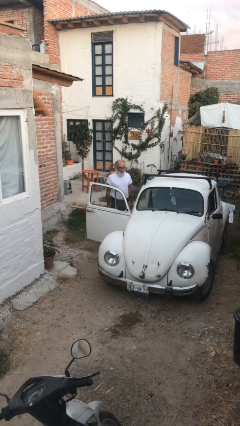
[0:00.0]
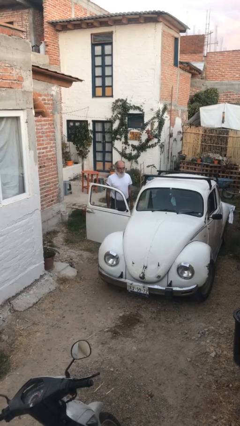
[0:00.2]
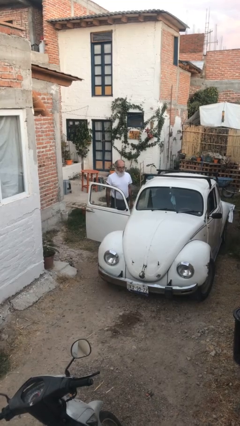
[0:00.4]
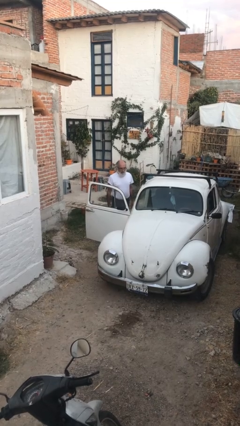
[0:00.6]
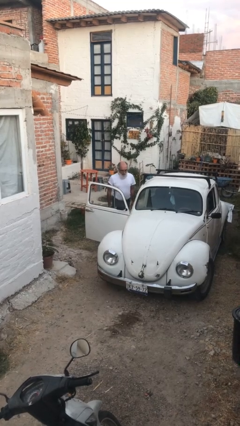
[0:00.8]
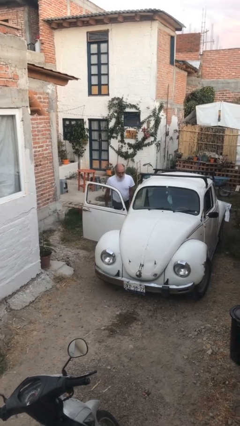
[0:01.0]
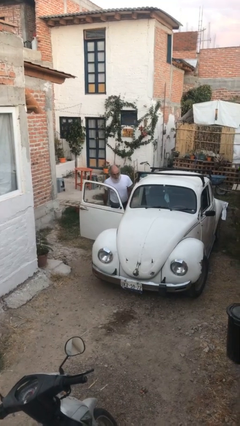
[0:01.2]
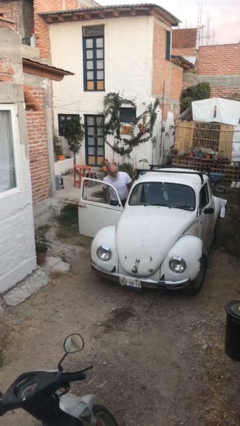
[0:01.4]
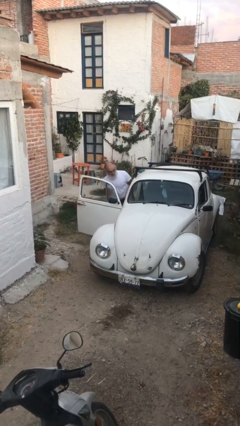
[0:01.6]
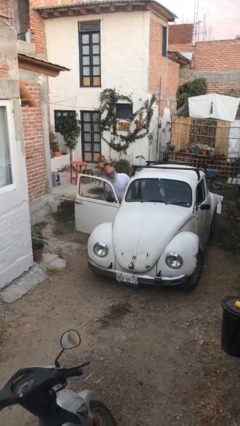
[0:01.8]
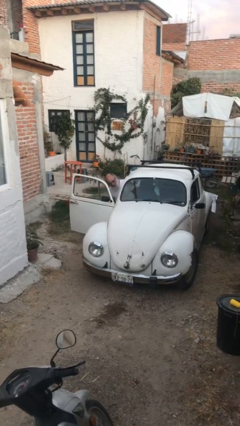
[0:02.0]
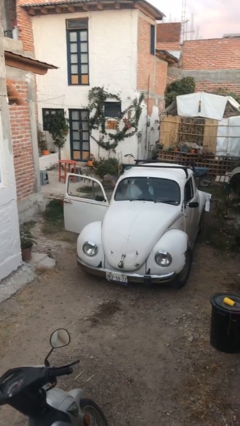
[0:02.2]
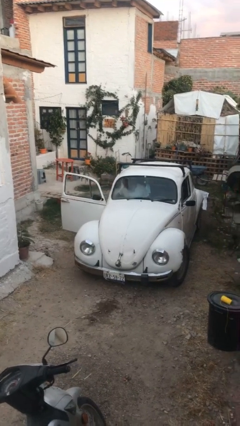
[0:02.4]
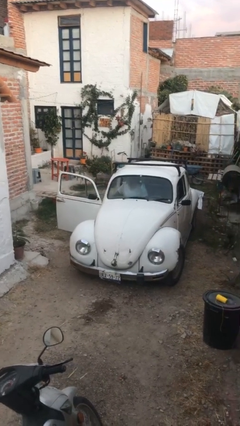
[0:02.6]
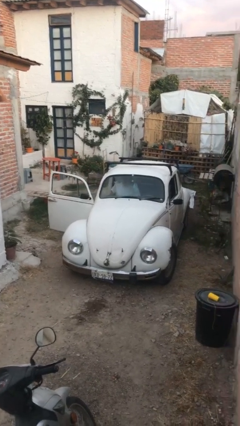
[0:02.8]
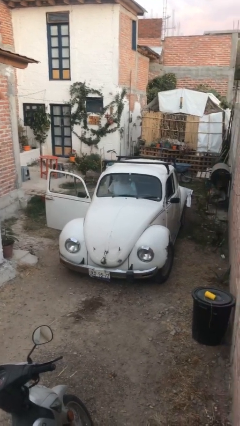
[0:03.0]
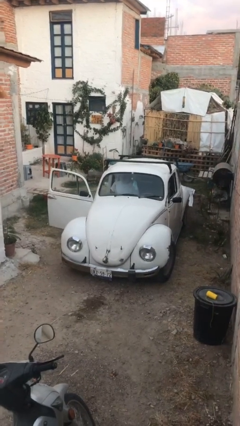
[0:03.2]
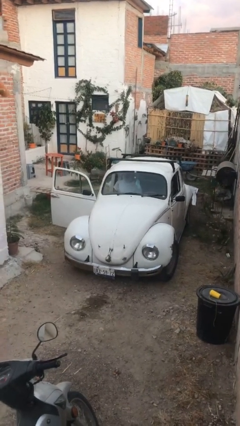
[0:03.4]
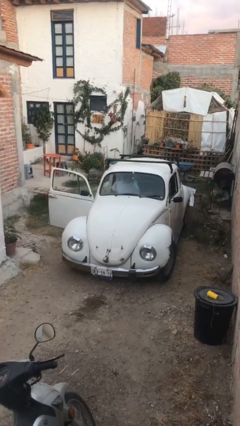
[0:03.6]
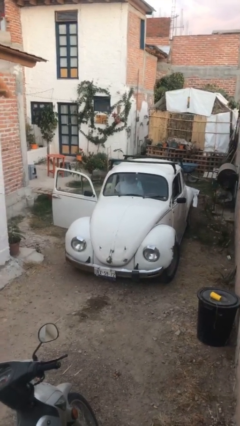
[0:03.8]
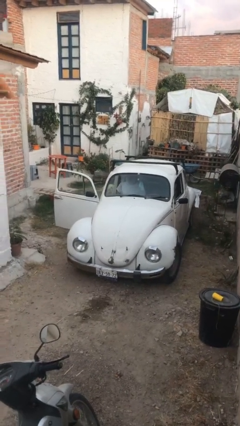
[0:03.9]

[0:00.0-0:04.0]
person enters car

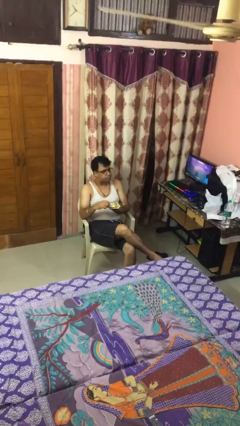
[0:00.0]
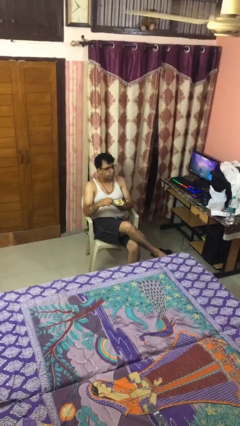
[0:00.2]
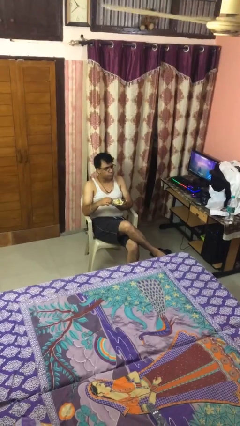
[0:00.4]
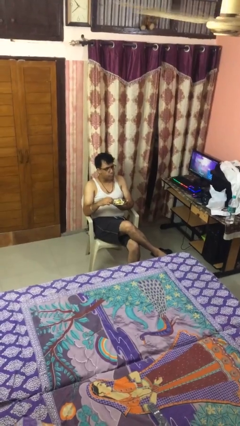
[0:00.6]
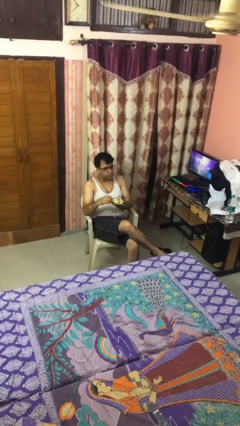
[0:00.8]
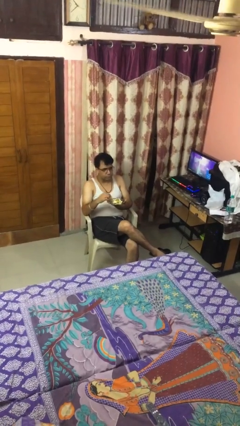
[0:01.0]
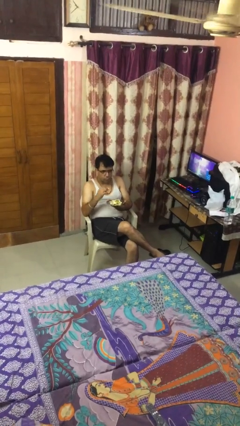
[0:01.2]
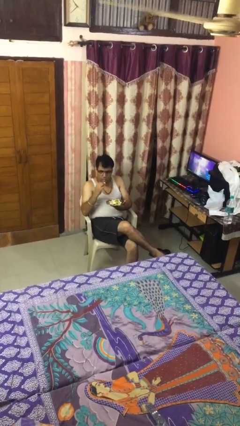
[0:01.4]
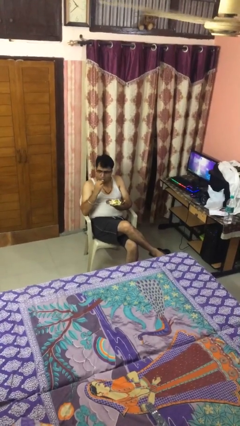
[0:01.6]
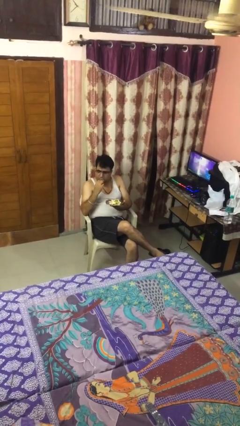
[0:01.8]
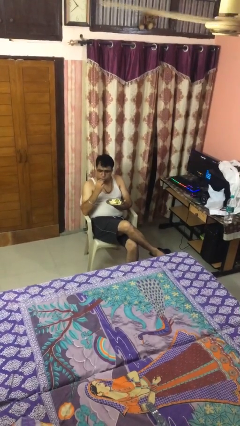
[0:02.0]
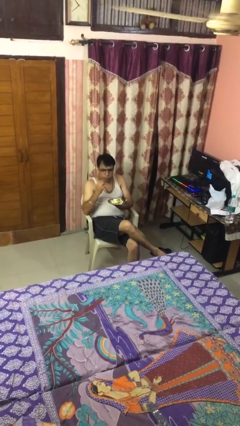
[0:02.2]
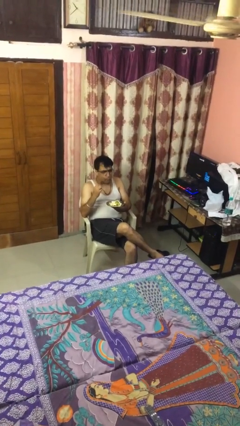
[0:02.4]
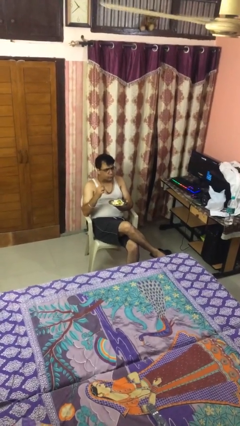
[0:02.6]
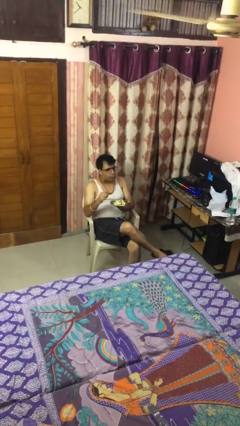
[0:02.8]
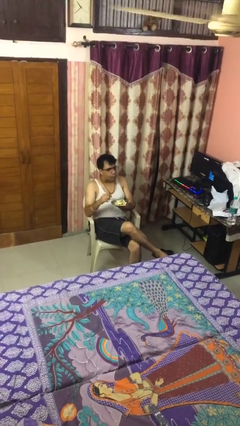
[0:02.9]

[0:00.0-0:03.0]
person eats with hands

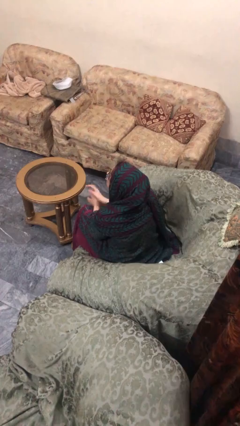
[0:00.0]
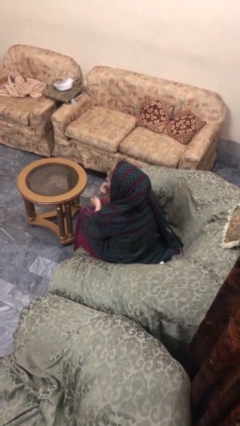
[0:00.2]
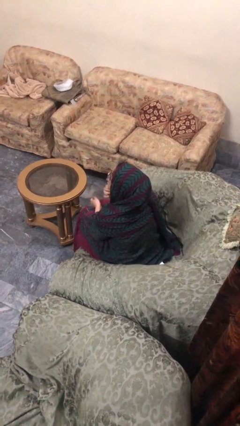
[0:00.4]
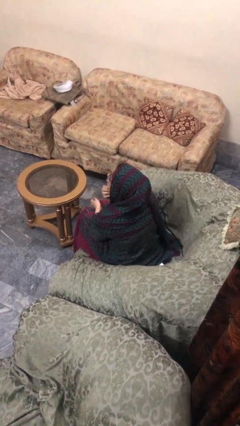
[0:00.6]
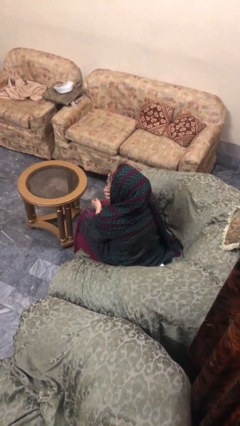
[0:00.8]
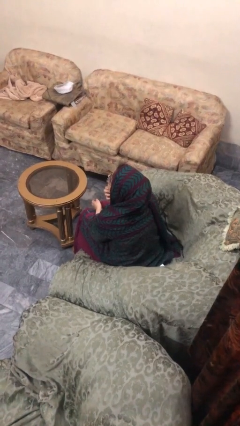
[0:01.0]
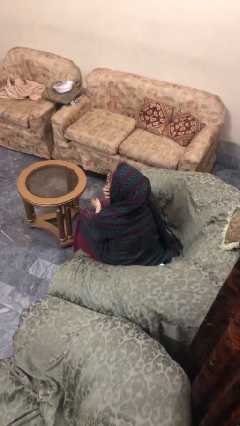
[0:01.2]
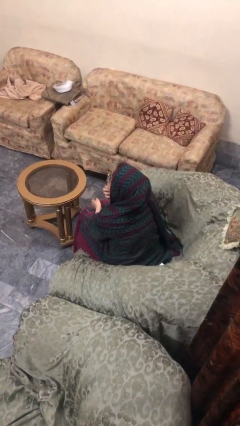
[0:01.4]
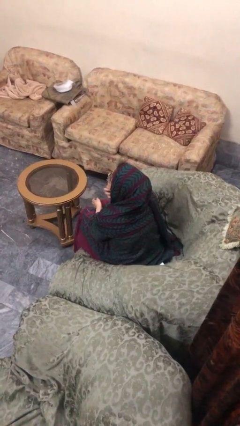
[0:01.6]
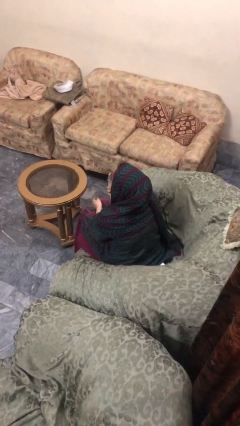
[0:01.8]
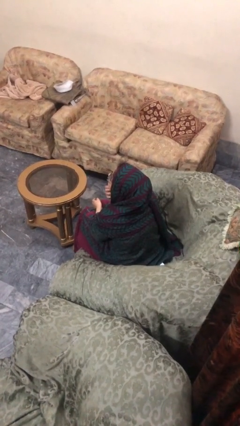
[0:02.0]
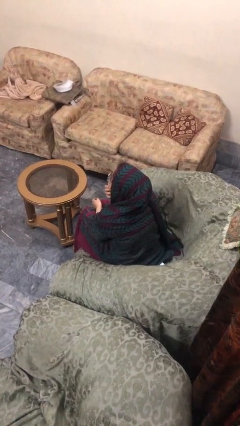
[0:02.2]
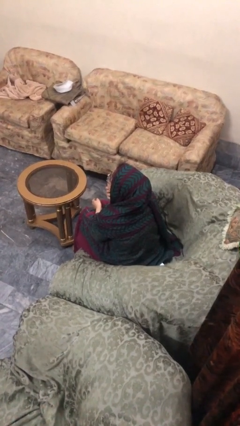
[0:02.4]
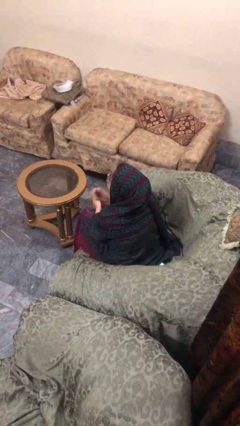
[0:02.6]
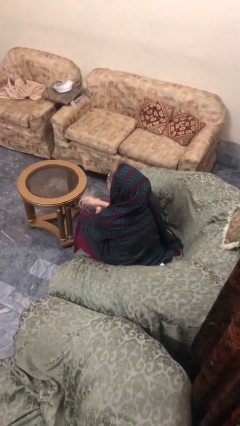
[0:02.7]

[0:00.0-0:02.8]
person strokes chin

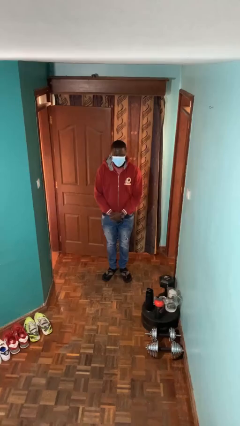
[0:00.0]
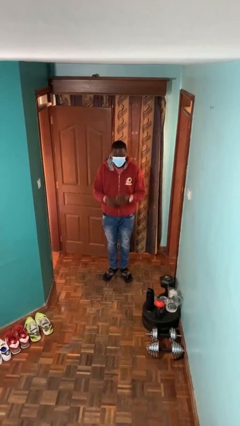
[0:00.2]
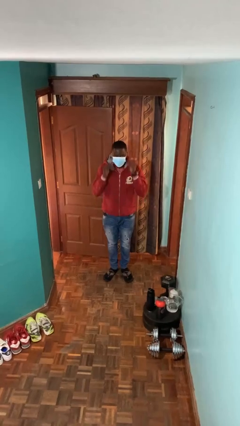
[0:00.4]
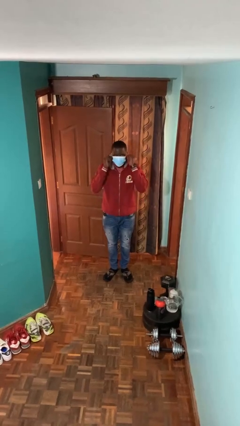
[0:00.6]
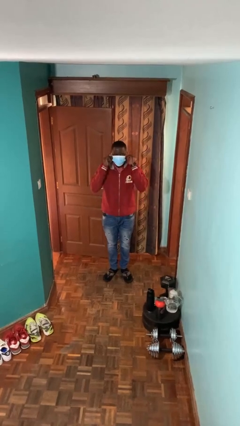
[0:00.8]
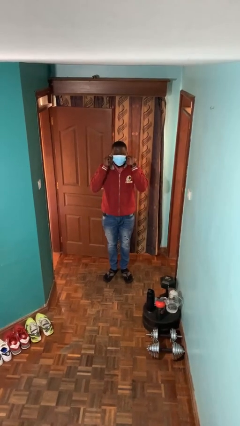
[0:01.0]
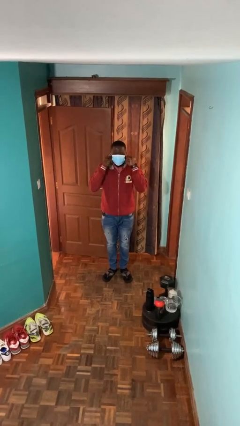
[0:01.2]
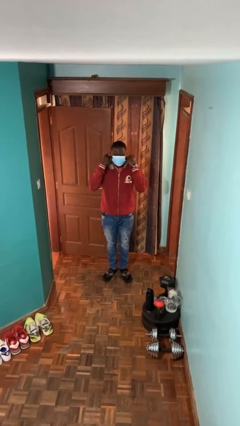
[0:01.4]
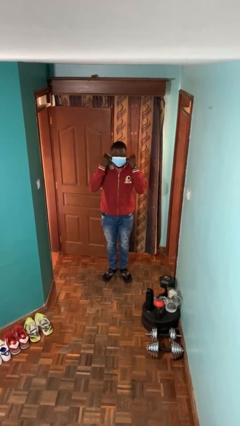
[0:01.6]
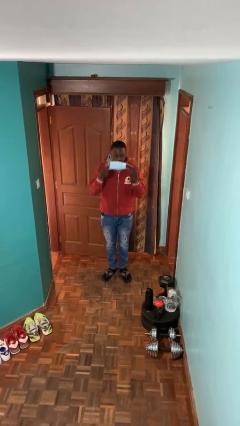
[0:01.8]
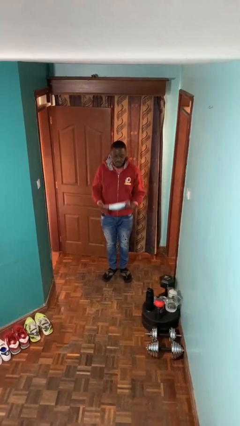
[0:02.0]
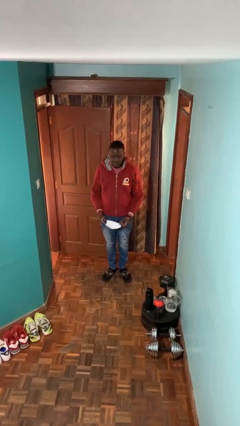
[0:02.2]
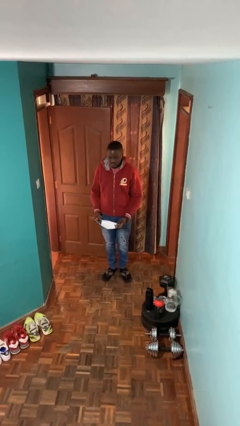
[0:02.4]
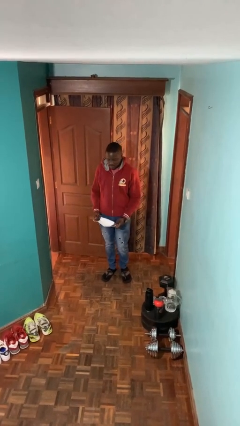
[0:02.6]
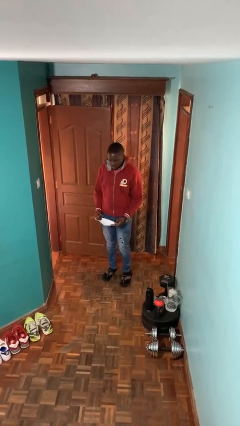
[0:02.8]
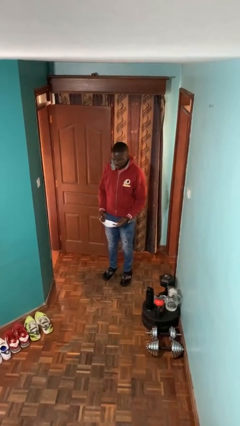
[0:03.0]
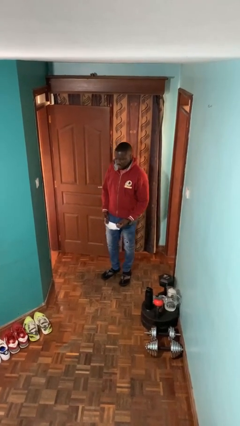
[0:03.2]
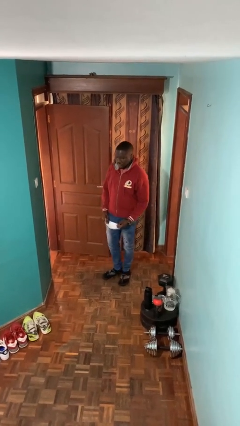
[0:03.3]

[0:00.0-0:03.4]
person takes off facemask

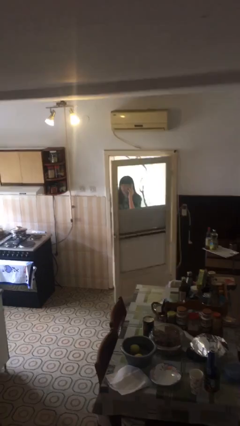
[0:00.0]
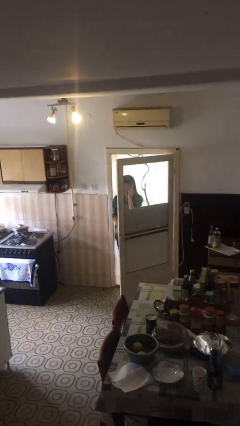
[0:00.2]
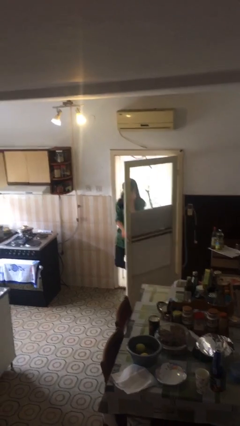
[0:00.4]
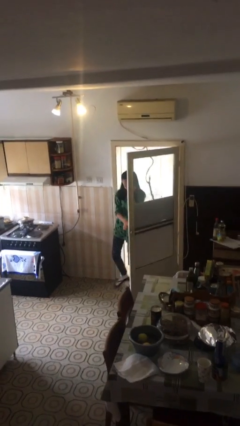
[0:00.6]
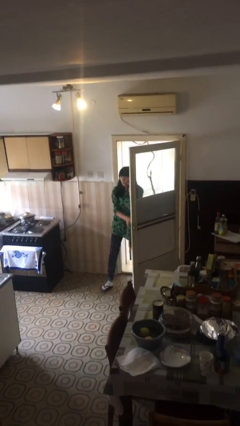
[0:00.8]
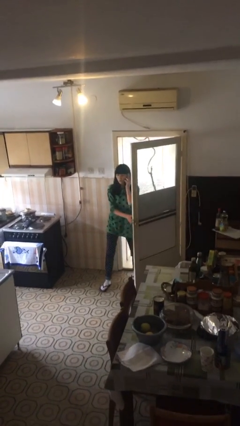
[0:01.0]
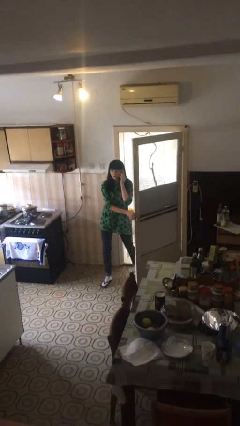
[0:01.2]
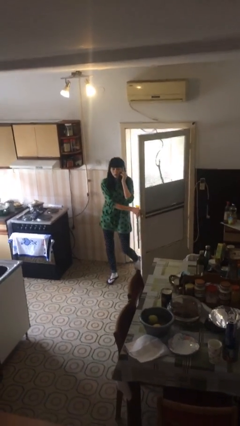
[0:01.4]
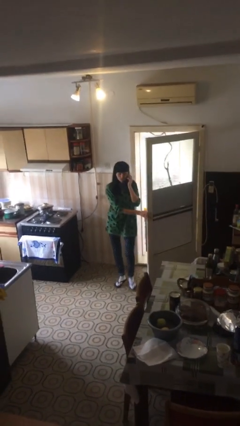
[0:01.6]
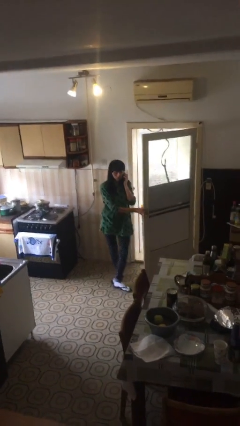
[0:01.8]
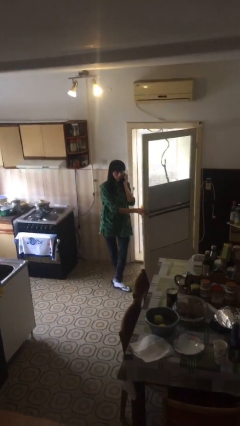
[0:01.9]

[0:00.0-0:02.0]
person enters scene through structure

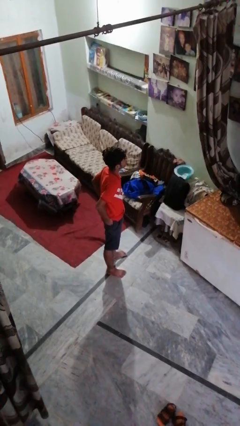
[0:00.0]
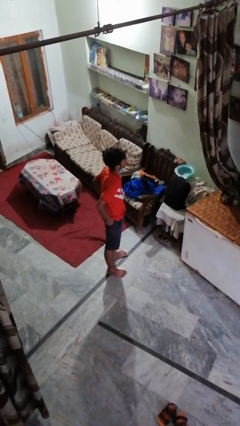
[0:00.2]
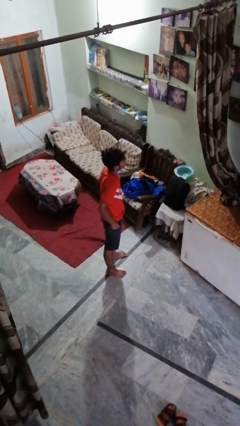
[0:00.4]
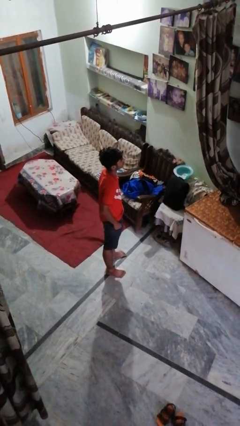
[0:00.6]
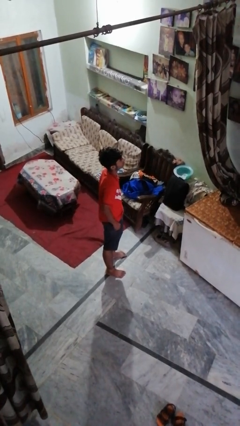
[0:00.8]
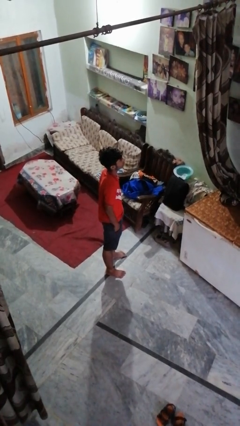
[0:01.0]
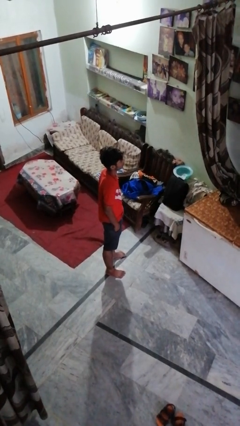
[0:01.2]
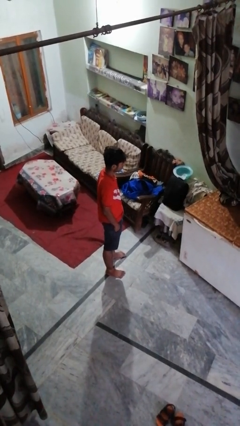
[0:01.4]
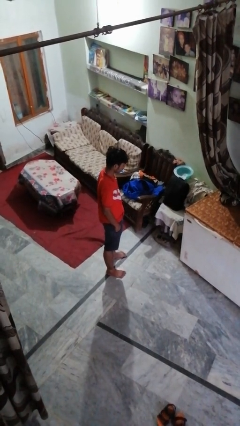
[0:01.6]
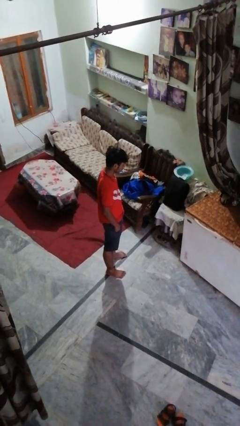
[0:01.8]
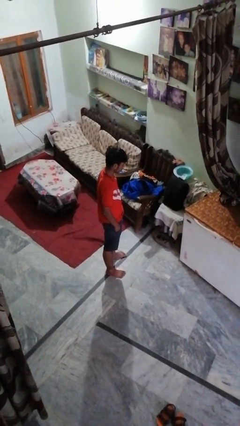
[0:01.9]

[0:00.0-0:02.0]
person puts hands in back pockets
